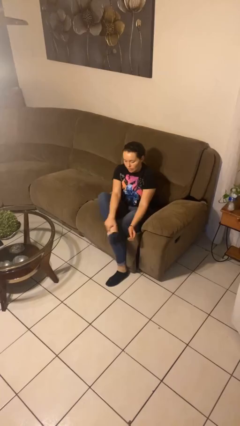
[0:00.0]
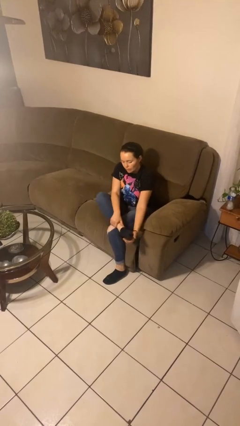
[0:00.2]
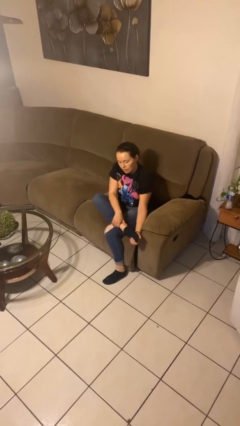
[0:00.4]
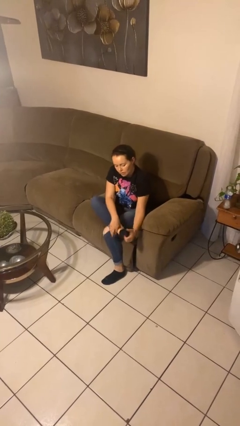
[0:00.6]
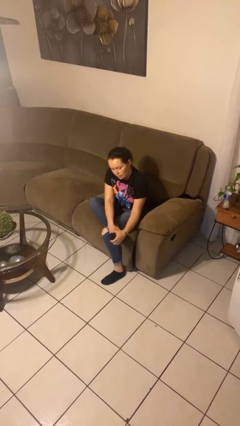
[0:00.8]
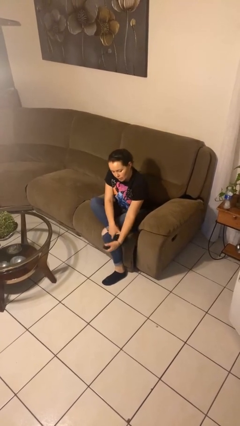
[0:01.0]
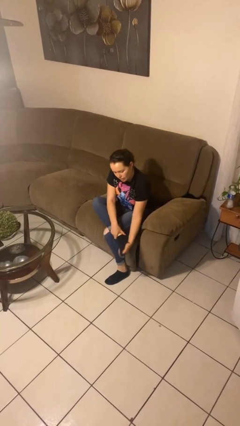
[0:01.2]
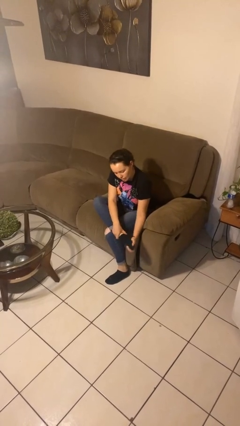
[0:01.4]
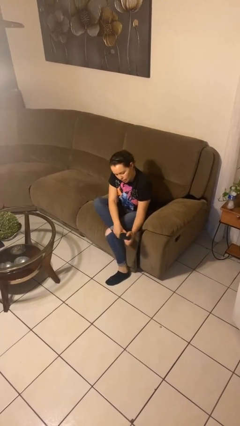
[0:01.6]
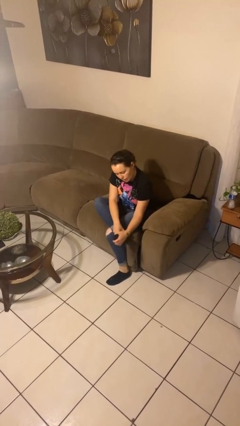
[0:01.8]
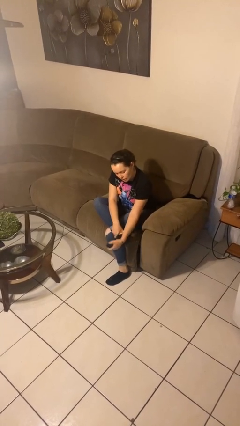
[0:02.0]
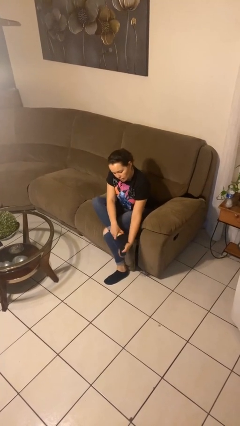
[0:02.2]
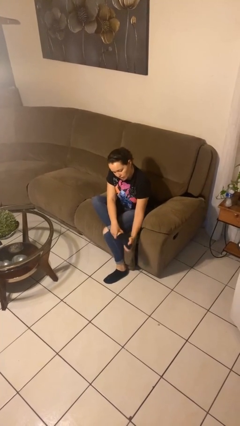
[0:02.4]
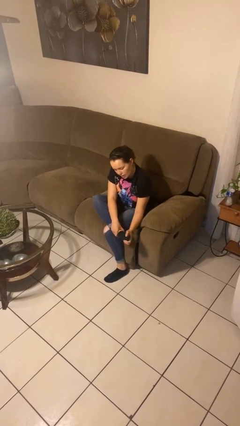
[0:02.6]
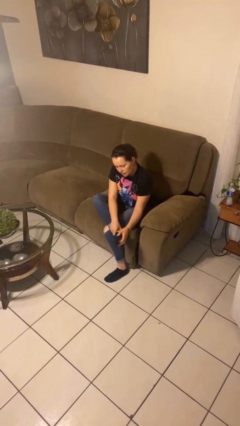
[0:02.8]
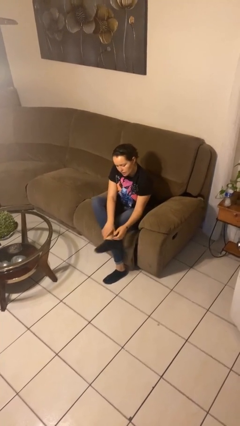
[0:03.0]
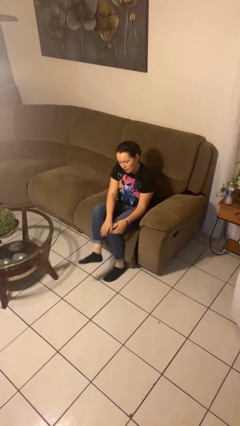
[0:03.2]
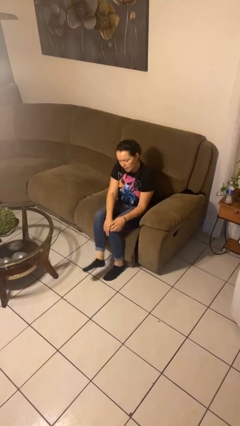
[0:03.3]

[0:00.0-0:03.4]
person rubs foot

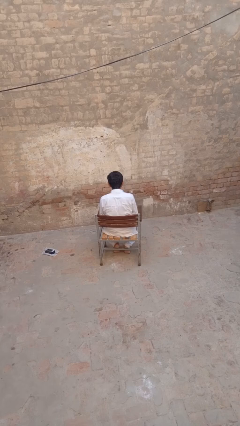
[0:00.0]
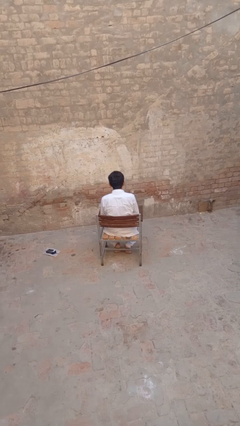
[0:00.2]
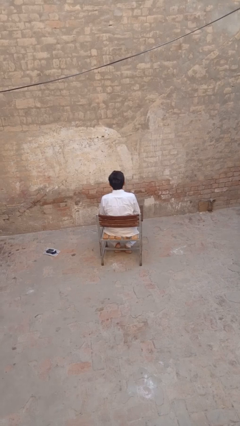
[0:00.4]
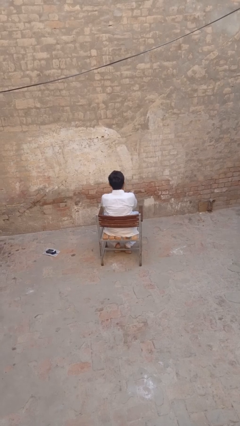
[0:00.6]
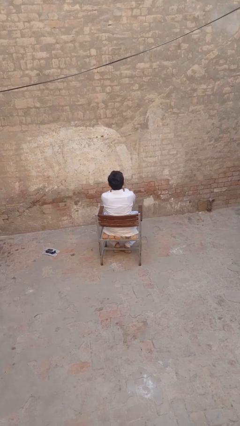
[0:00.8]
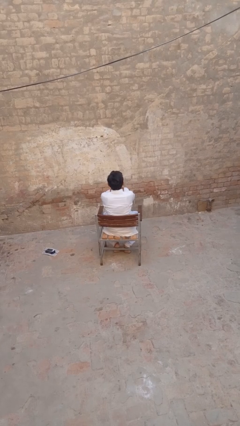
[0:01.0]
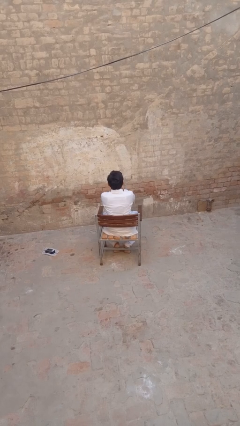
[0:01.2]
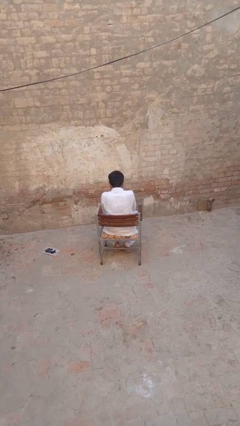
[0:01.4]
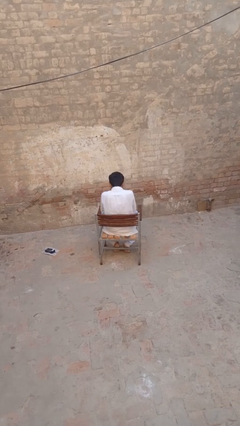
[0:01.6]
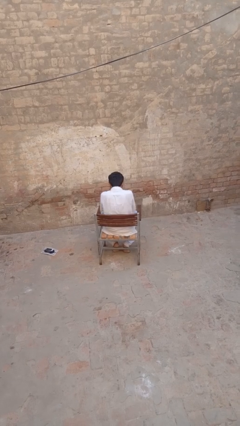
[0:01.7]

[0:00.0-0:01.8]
person sneezes into hand

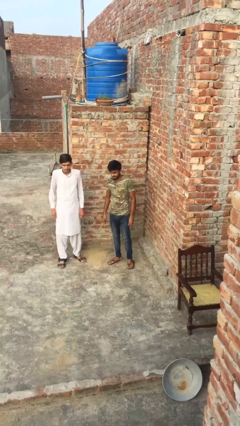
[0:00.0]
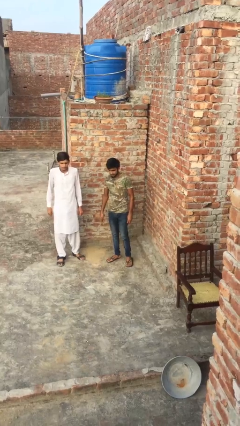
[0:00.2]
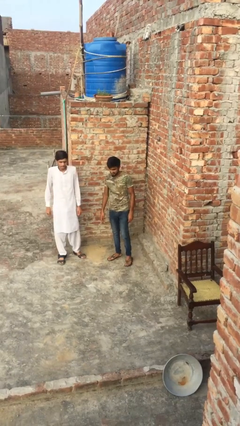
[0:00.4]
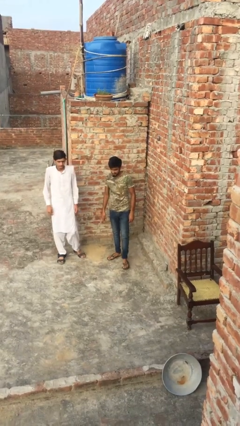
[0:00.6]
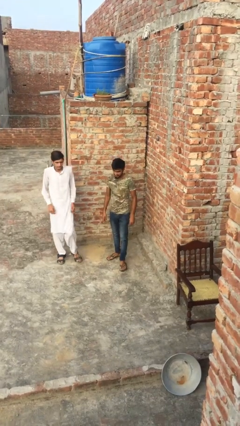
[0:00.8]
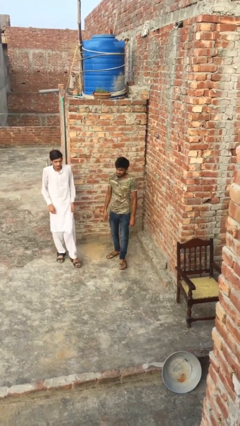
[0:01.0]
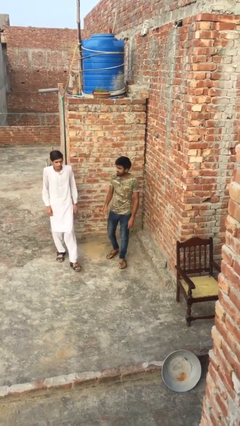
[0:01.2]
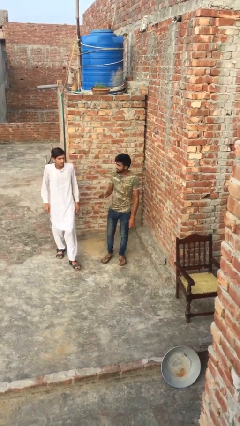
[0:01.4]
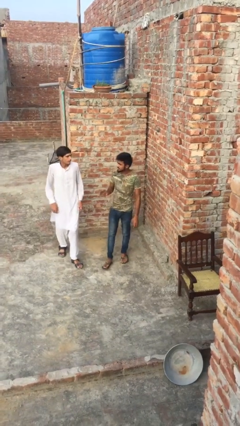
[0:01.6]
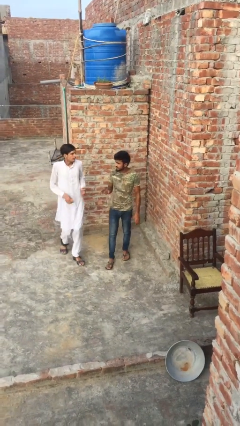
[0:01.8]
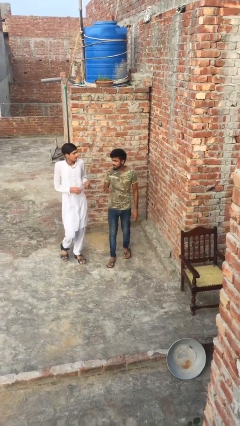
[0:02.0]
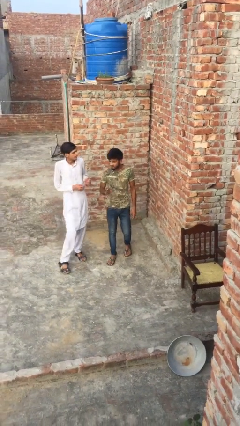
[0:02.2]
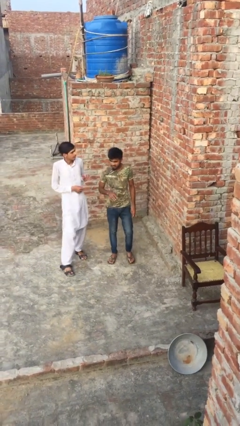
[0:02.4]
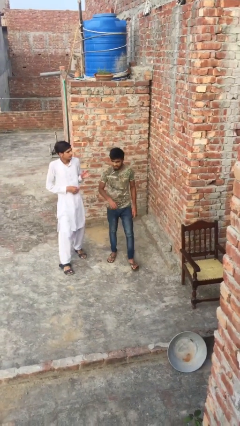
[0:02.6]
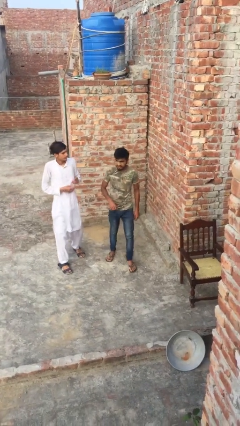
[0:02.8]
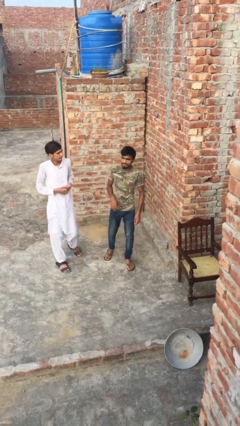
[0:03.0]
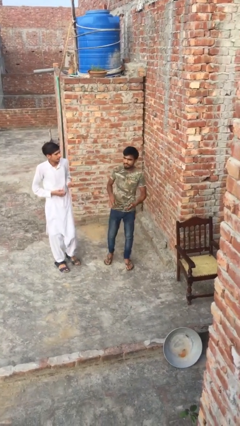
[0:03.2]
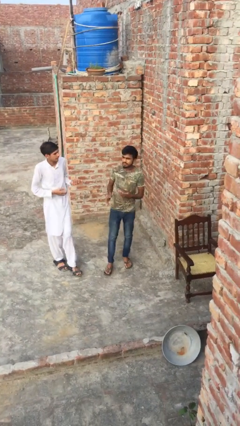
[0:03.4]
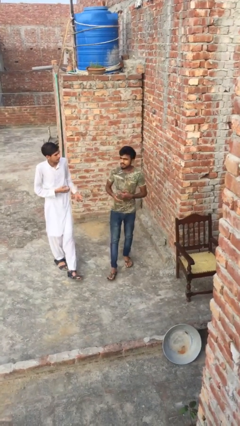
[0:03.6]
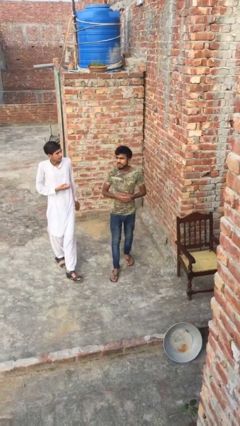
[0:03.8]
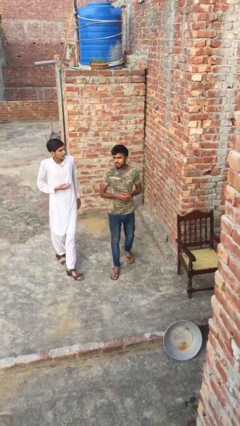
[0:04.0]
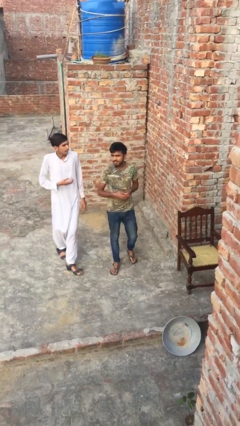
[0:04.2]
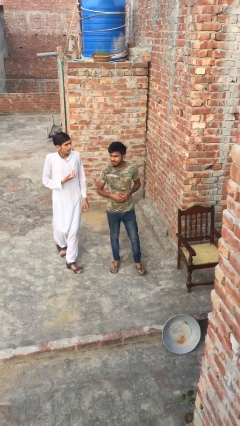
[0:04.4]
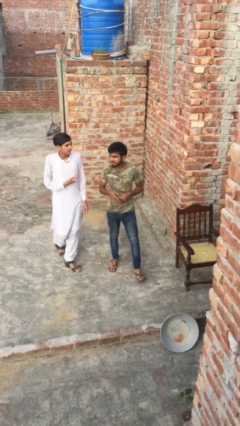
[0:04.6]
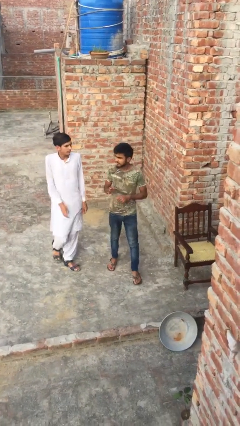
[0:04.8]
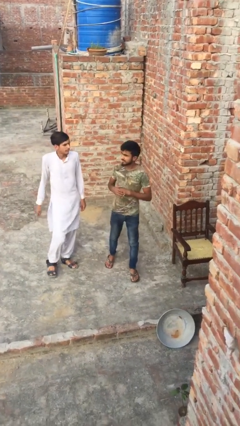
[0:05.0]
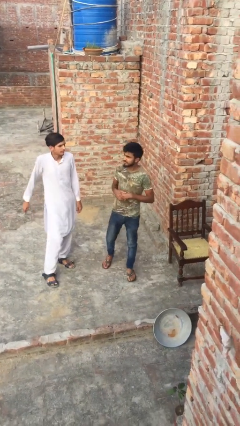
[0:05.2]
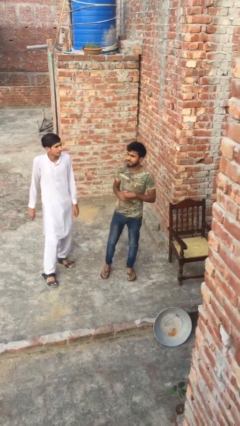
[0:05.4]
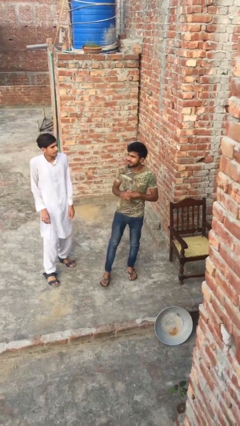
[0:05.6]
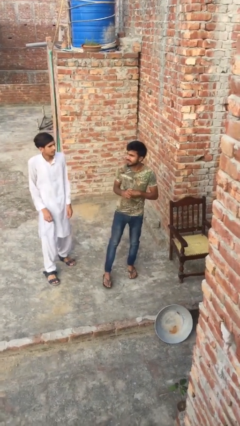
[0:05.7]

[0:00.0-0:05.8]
person talks to person

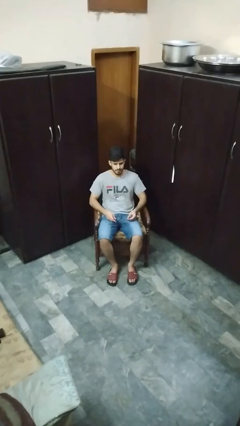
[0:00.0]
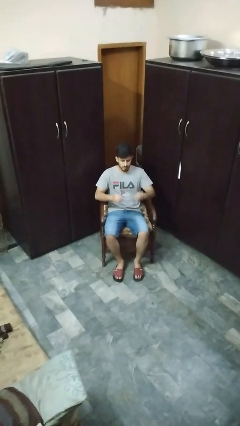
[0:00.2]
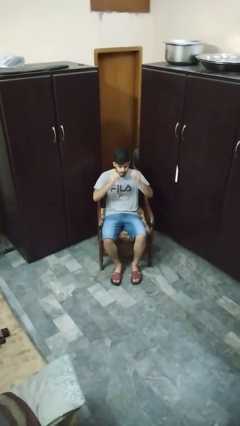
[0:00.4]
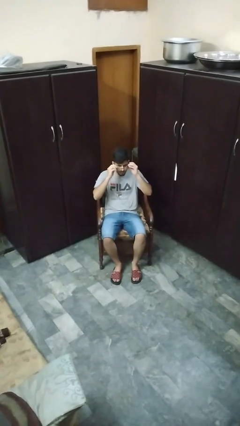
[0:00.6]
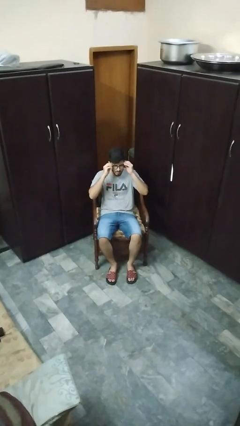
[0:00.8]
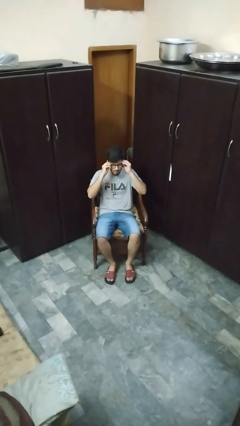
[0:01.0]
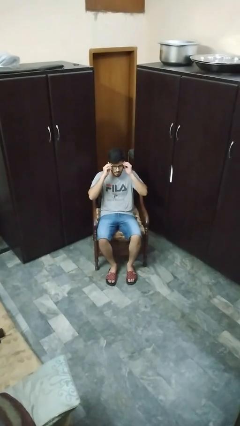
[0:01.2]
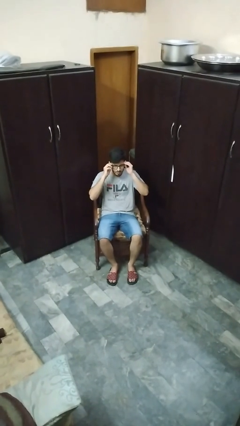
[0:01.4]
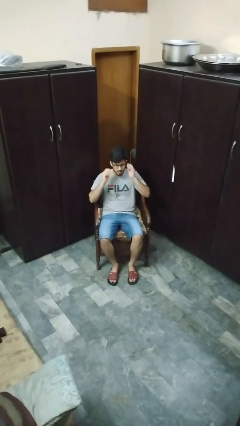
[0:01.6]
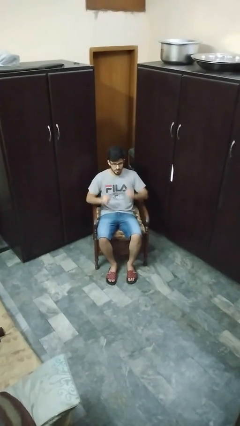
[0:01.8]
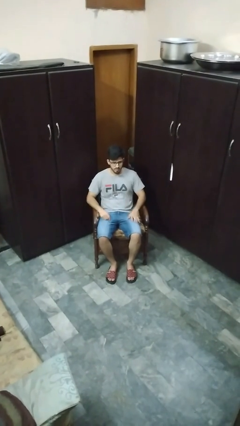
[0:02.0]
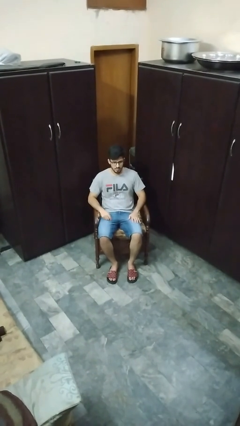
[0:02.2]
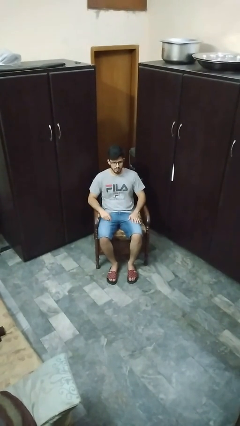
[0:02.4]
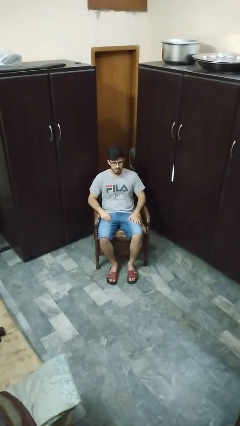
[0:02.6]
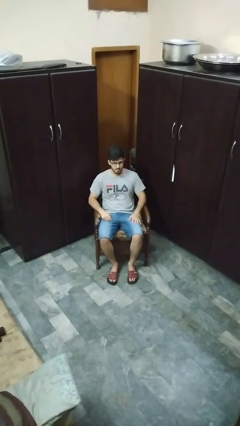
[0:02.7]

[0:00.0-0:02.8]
person puts on glasses

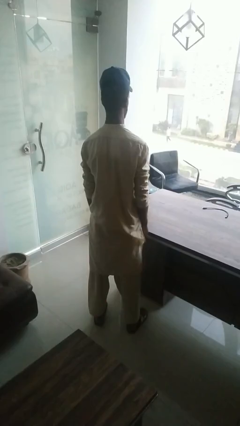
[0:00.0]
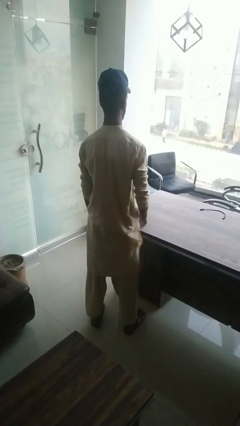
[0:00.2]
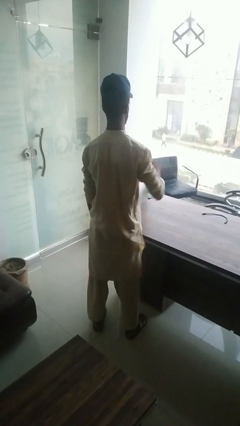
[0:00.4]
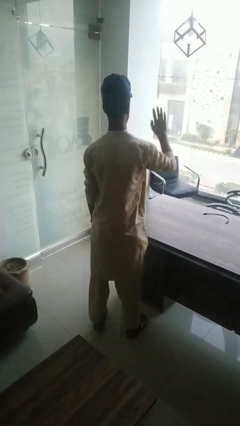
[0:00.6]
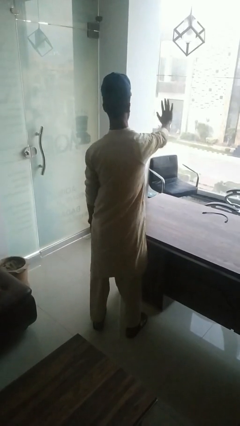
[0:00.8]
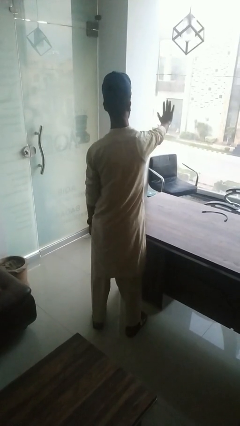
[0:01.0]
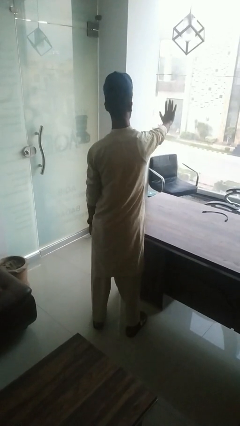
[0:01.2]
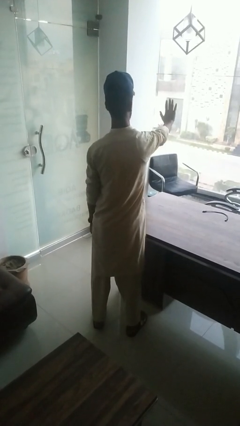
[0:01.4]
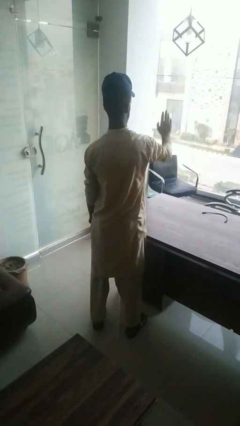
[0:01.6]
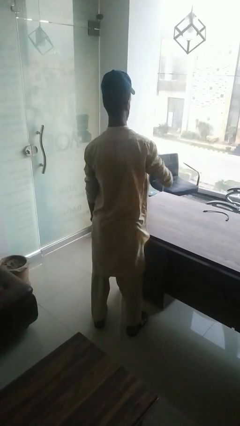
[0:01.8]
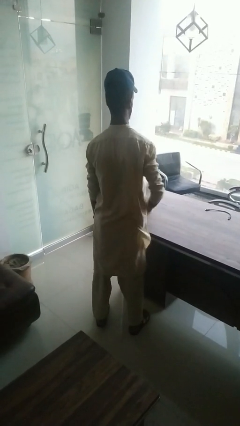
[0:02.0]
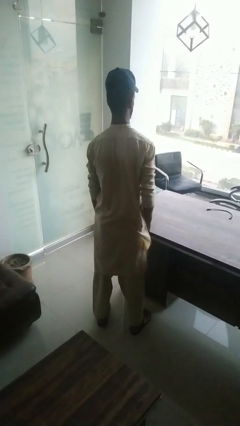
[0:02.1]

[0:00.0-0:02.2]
person gestures stop

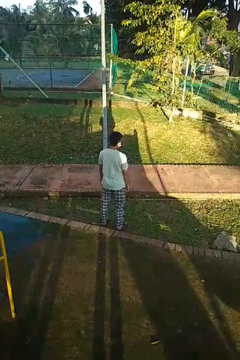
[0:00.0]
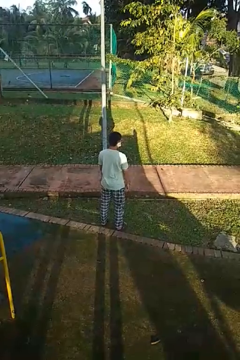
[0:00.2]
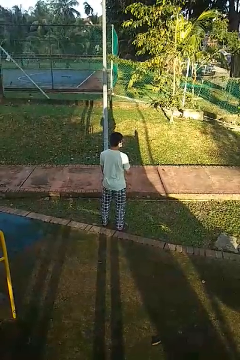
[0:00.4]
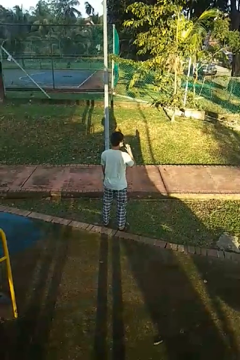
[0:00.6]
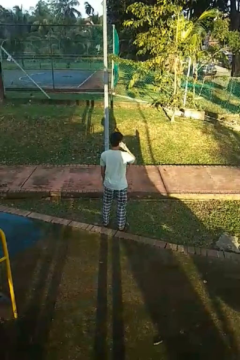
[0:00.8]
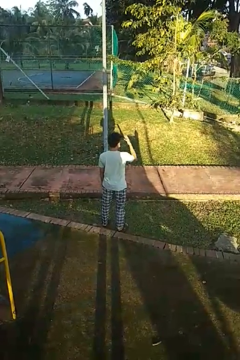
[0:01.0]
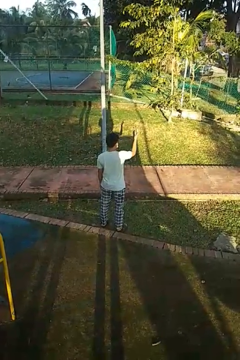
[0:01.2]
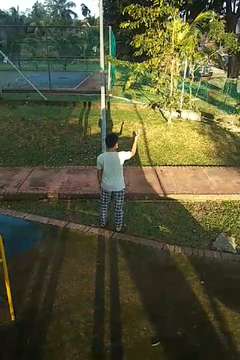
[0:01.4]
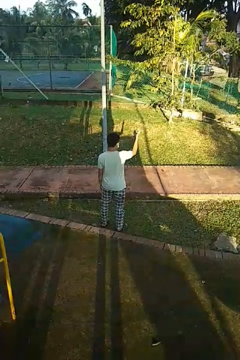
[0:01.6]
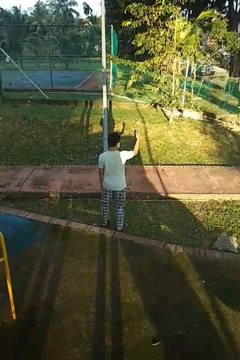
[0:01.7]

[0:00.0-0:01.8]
person gestures blow kiss

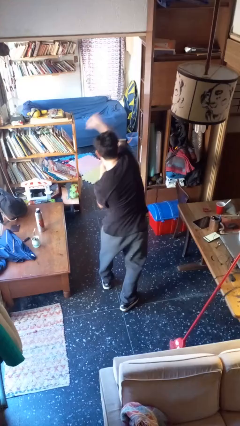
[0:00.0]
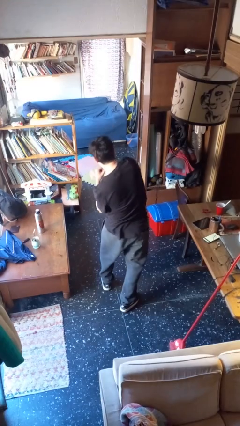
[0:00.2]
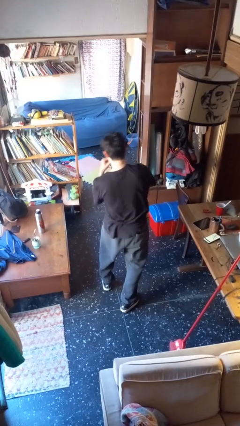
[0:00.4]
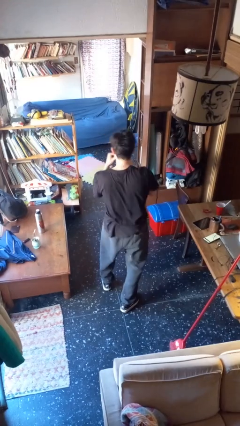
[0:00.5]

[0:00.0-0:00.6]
person punches
